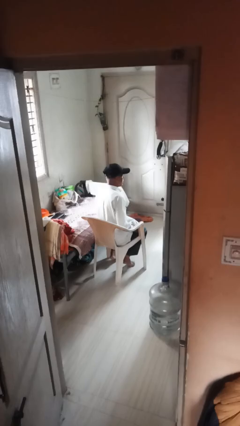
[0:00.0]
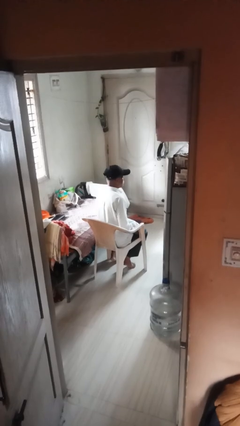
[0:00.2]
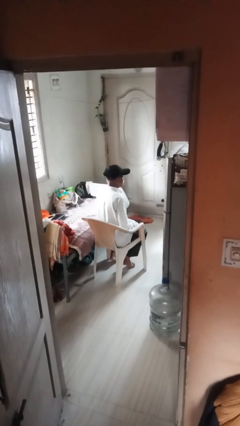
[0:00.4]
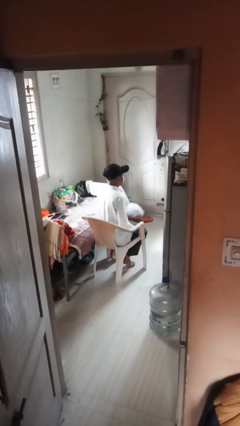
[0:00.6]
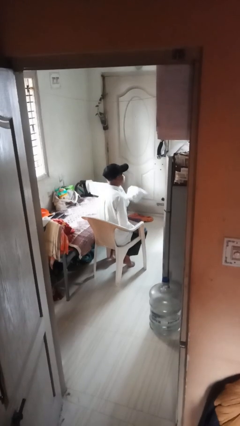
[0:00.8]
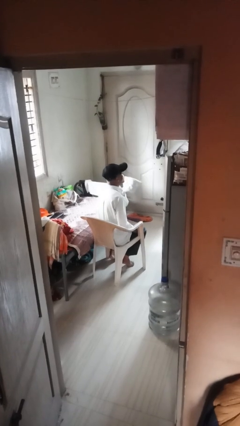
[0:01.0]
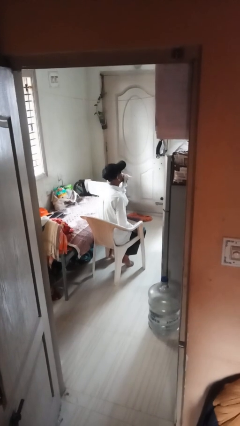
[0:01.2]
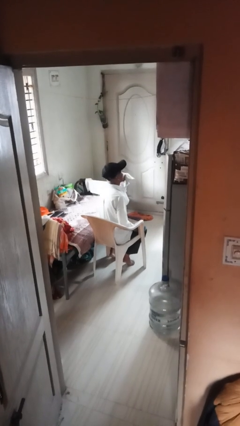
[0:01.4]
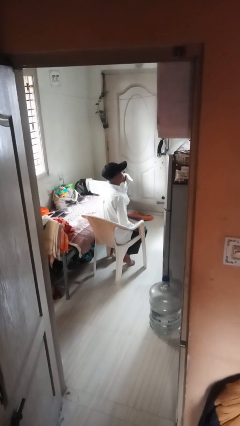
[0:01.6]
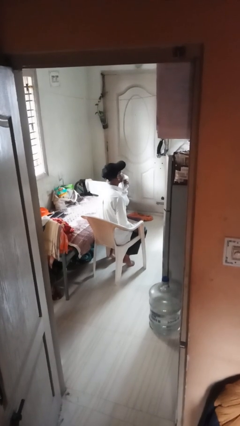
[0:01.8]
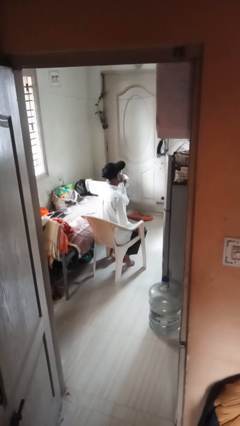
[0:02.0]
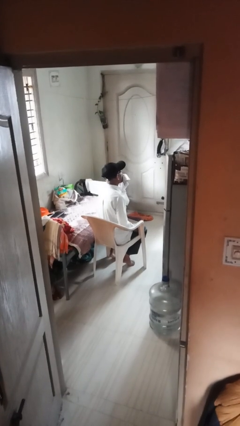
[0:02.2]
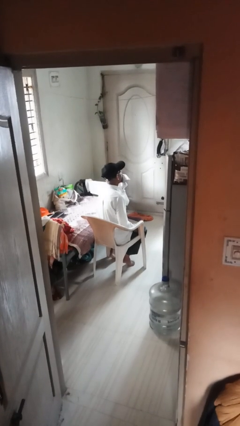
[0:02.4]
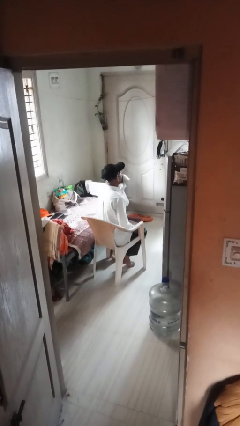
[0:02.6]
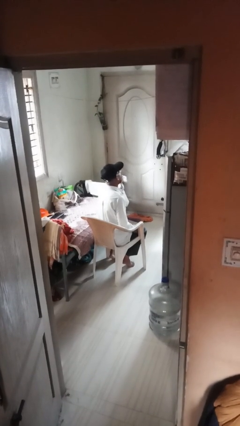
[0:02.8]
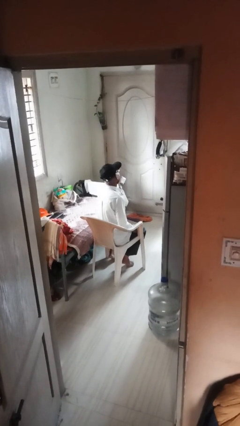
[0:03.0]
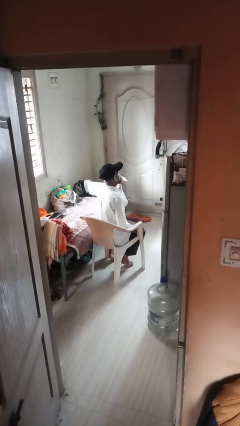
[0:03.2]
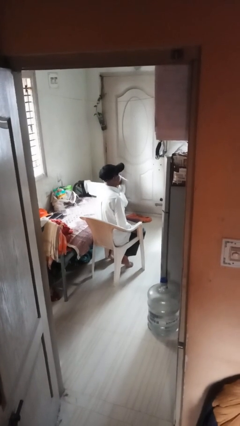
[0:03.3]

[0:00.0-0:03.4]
person wipes mouth with napkin

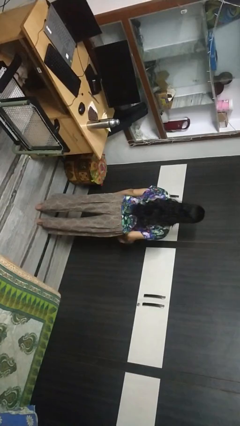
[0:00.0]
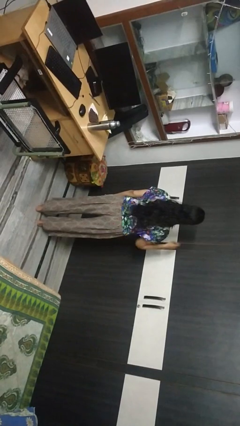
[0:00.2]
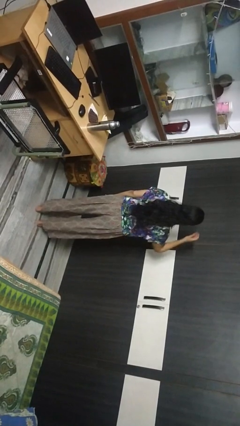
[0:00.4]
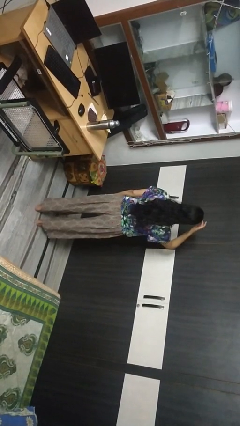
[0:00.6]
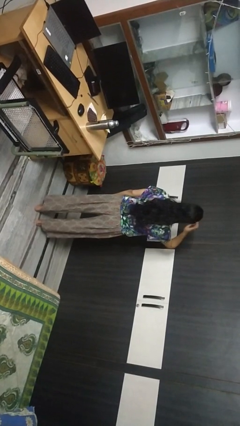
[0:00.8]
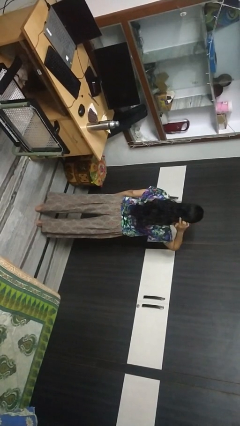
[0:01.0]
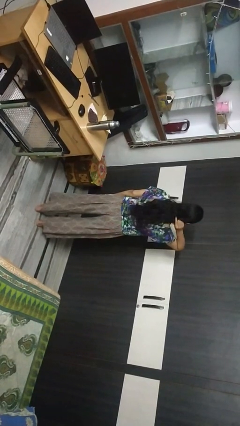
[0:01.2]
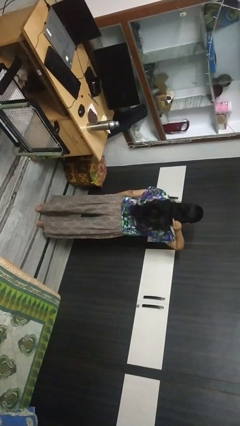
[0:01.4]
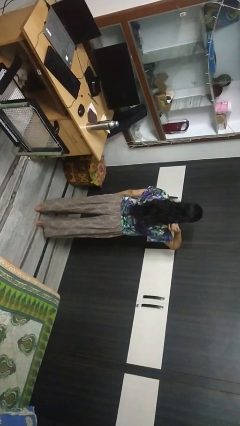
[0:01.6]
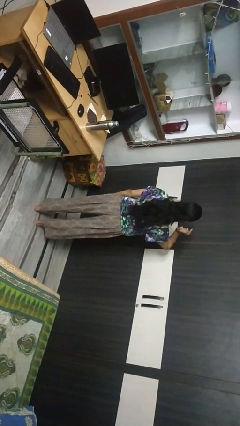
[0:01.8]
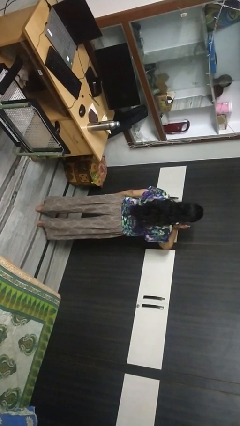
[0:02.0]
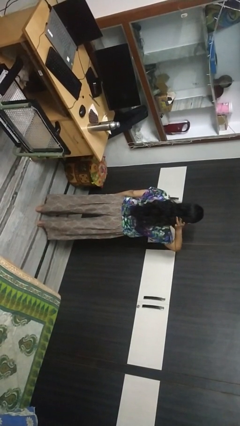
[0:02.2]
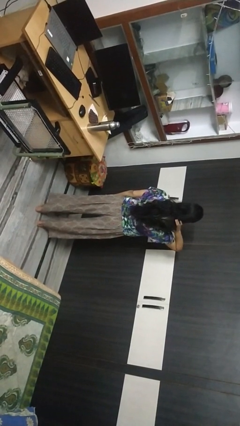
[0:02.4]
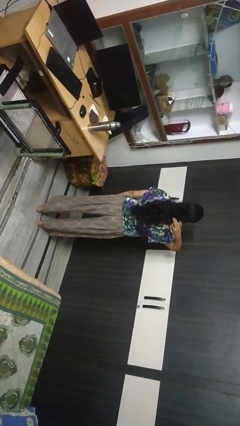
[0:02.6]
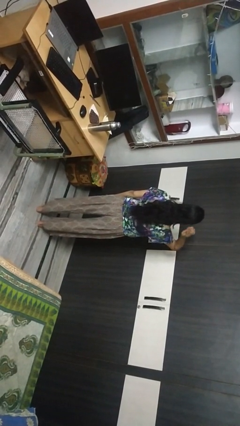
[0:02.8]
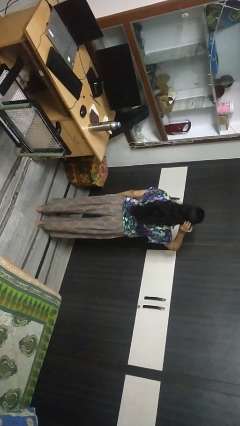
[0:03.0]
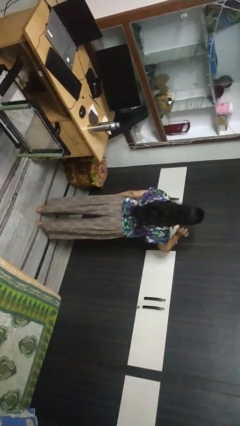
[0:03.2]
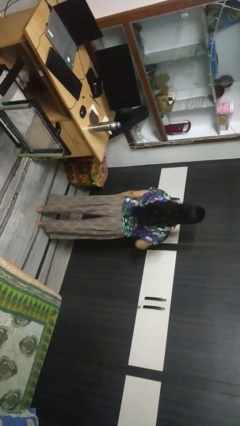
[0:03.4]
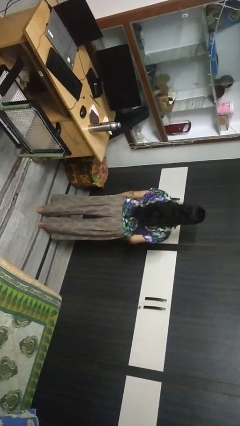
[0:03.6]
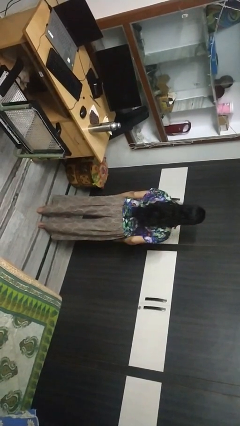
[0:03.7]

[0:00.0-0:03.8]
person strokes hair

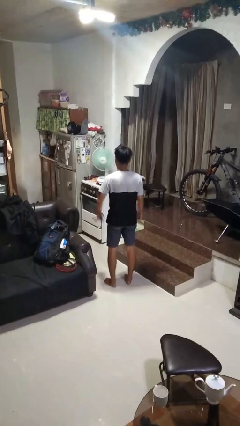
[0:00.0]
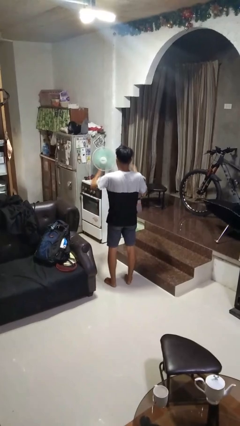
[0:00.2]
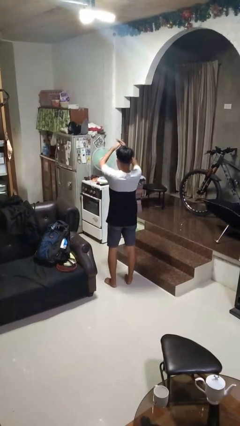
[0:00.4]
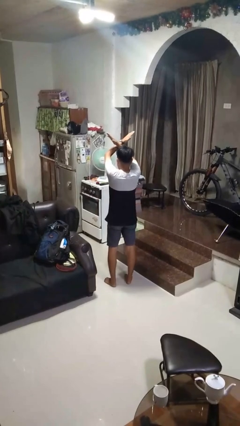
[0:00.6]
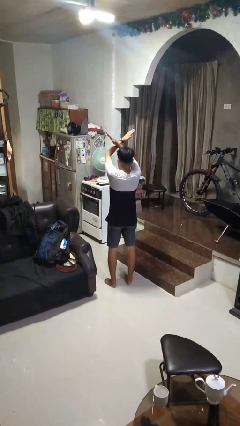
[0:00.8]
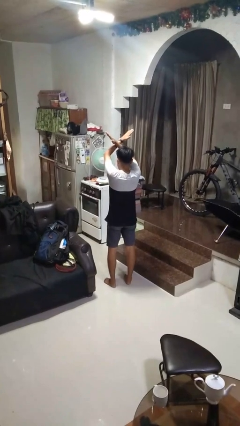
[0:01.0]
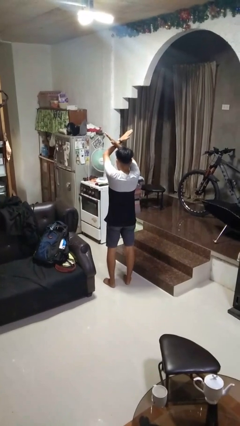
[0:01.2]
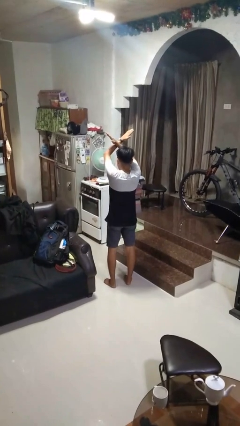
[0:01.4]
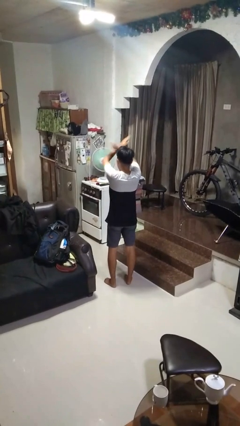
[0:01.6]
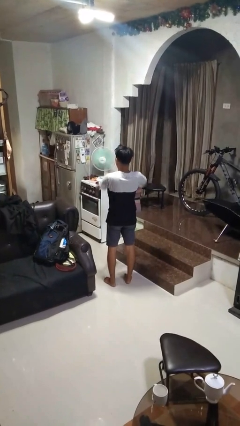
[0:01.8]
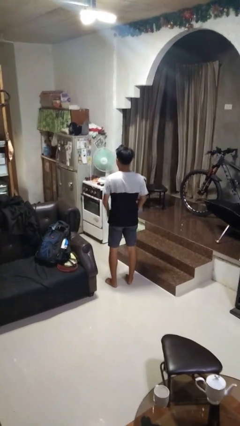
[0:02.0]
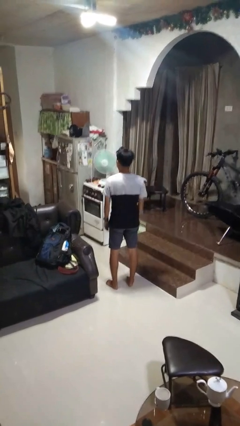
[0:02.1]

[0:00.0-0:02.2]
person gestures arms x

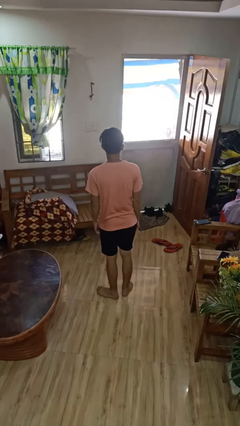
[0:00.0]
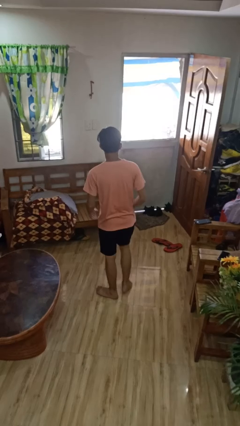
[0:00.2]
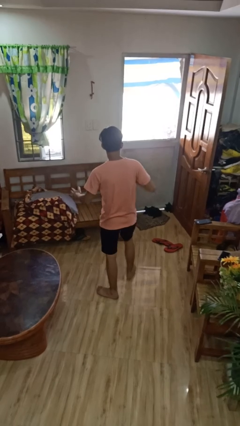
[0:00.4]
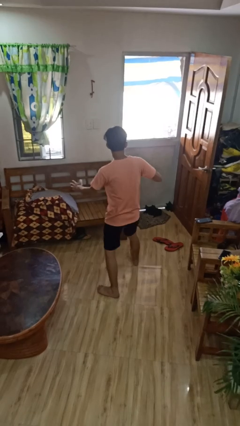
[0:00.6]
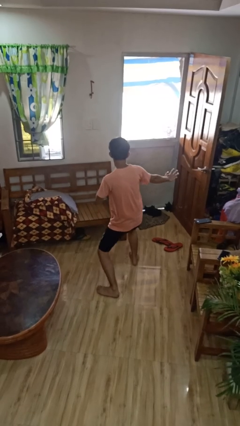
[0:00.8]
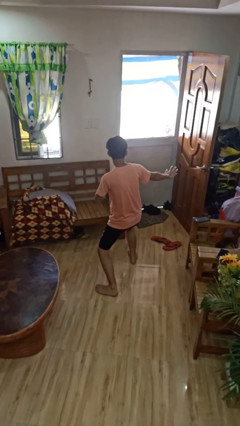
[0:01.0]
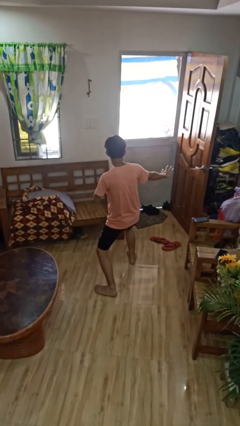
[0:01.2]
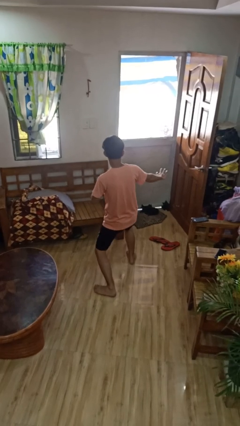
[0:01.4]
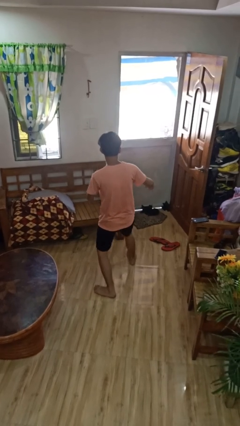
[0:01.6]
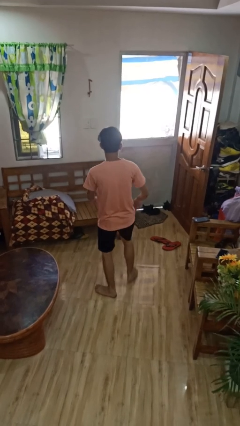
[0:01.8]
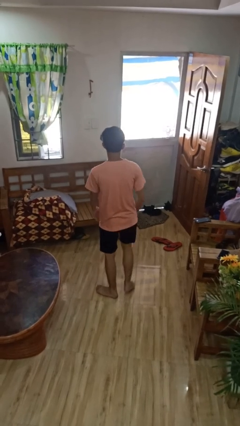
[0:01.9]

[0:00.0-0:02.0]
person karate chop

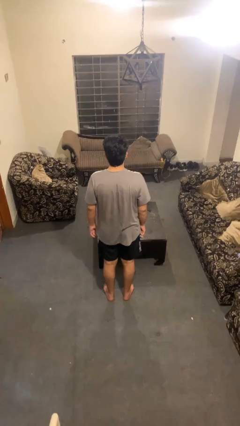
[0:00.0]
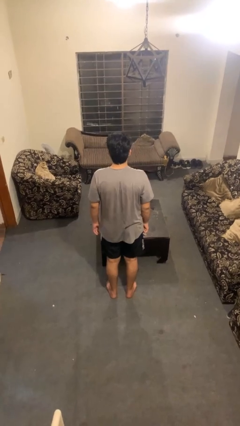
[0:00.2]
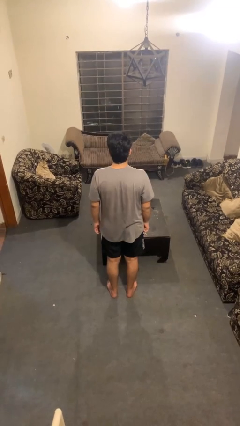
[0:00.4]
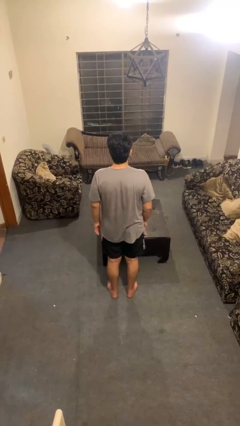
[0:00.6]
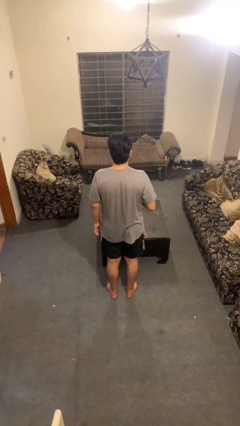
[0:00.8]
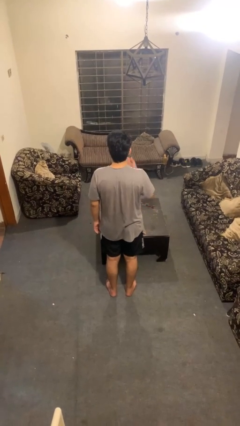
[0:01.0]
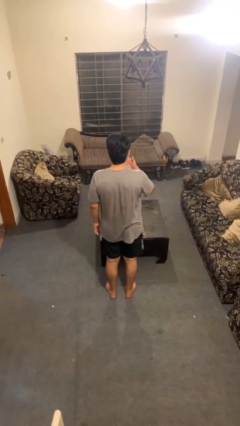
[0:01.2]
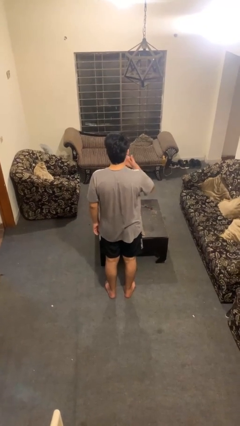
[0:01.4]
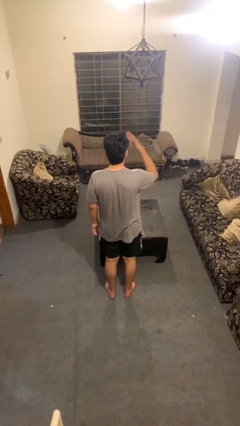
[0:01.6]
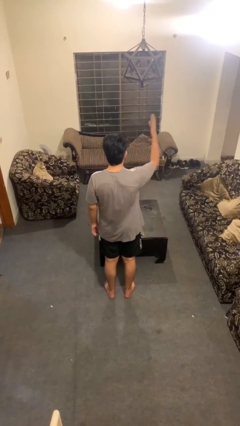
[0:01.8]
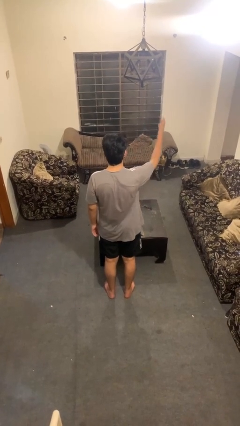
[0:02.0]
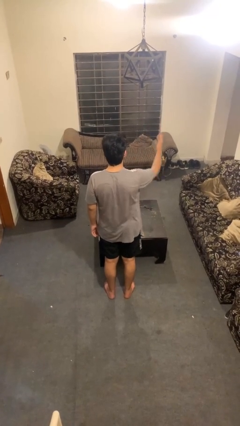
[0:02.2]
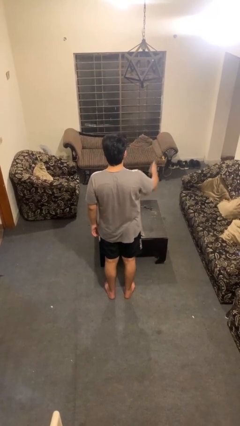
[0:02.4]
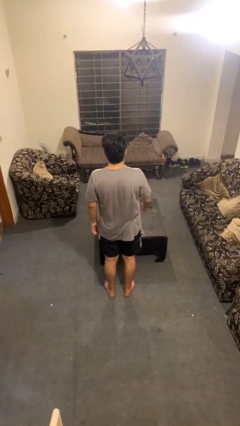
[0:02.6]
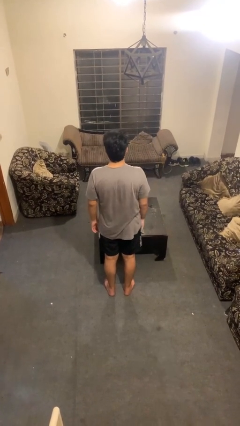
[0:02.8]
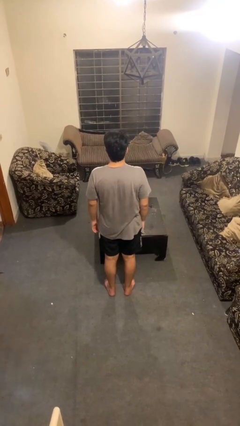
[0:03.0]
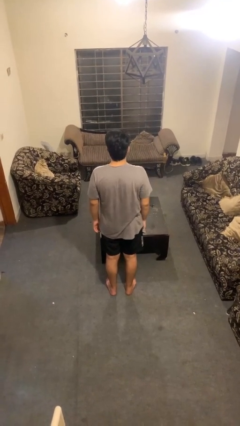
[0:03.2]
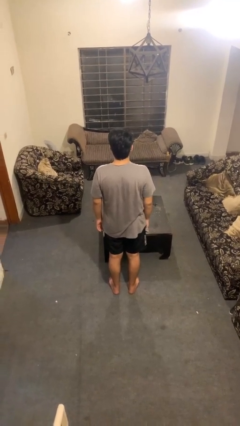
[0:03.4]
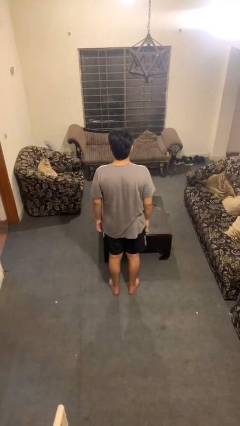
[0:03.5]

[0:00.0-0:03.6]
person gestures blow kiss

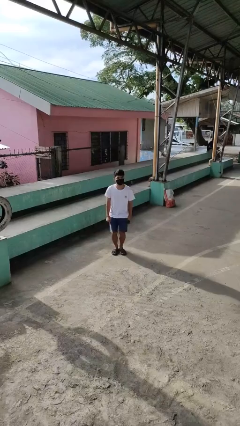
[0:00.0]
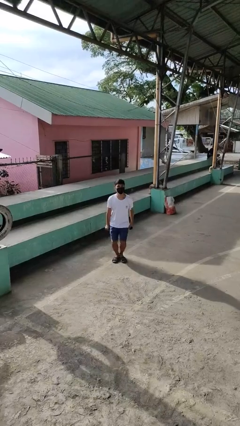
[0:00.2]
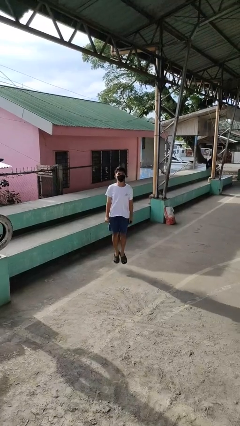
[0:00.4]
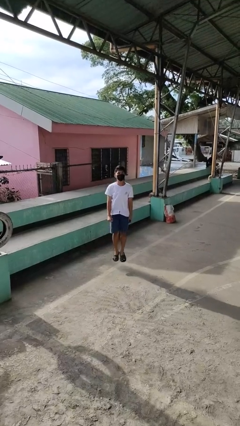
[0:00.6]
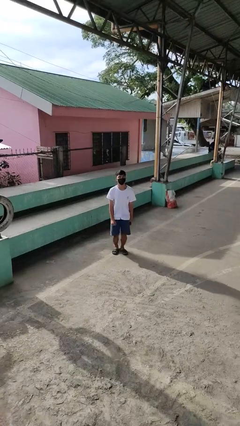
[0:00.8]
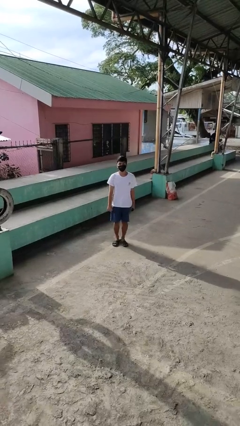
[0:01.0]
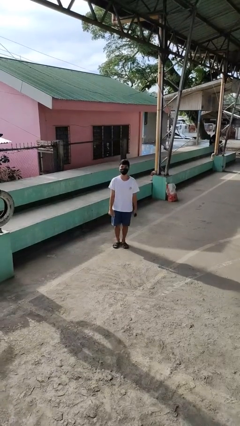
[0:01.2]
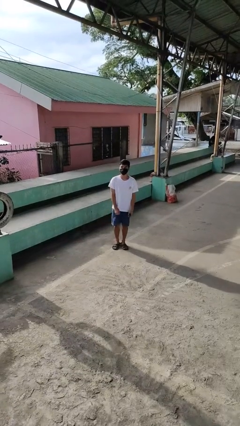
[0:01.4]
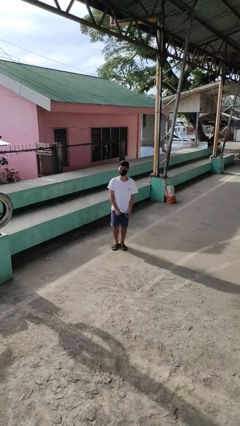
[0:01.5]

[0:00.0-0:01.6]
person jumps

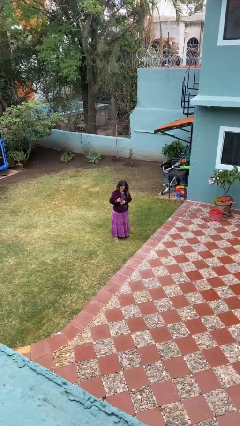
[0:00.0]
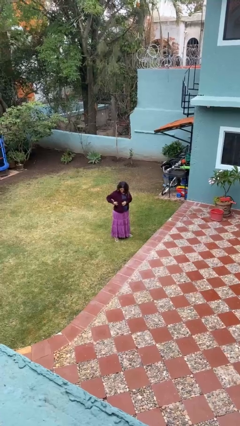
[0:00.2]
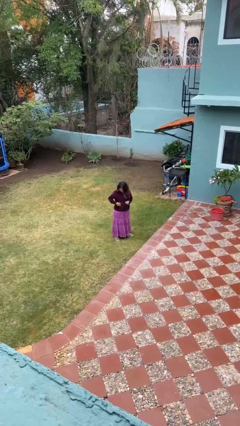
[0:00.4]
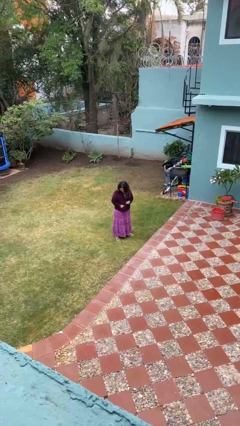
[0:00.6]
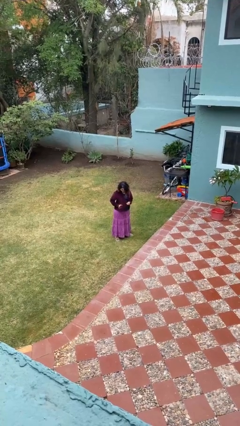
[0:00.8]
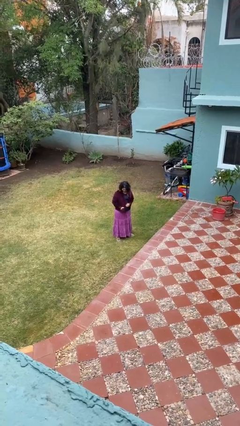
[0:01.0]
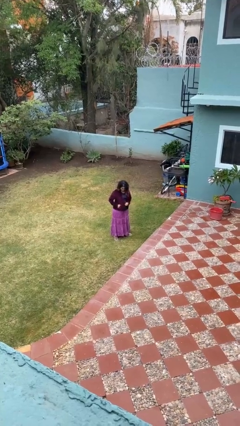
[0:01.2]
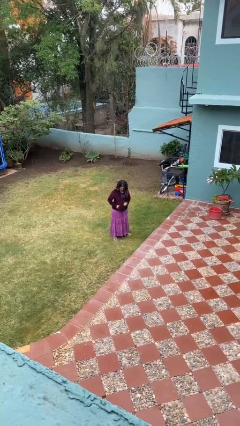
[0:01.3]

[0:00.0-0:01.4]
person puts phone into pocket
